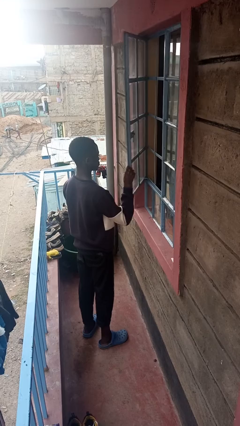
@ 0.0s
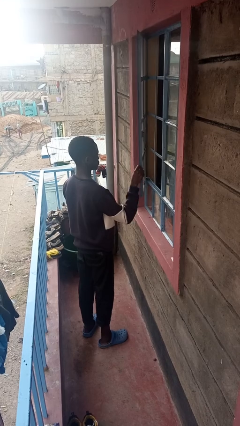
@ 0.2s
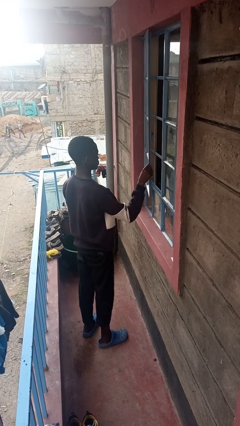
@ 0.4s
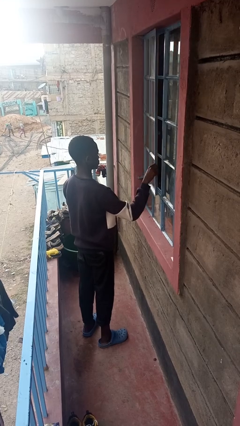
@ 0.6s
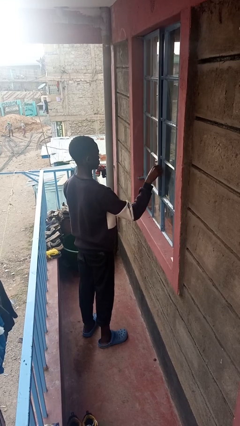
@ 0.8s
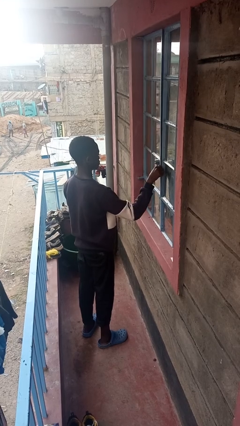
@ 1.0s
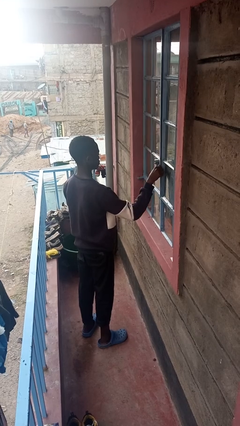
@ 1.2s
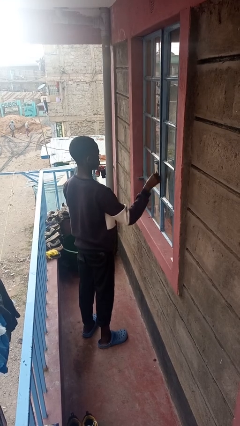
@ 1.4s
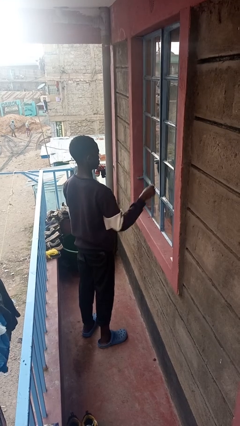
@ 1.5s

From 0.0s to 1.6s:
person closes home window

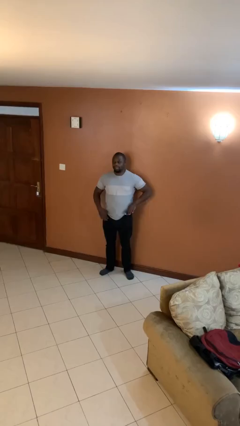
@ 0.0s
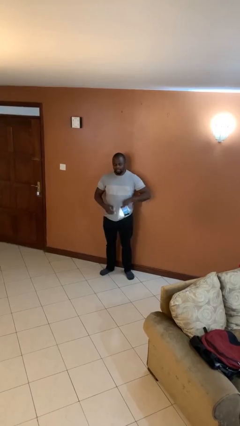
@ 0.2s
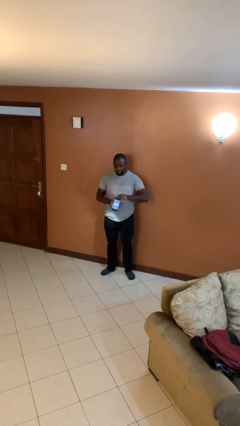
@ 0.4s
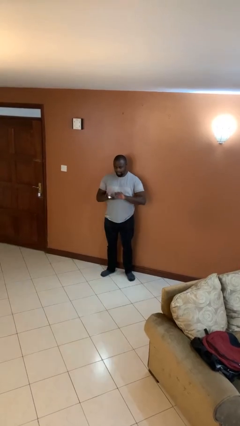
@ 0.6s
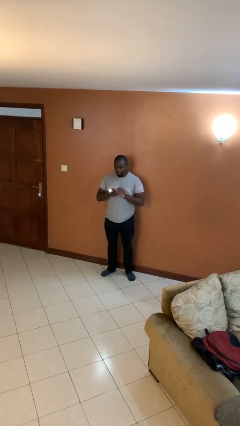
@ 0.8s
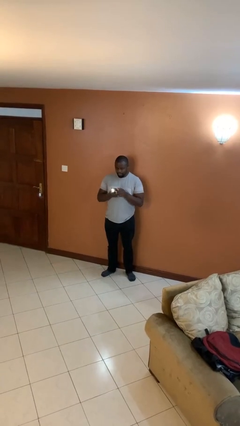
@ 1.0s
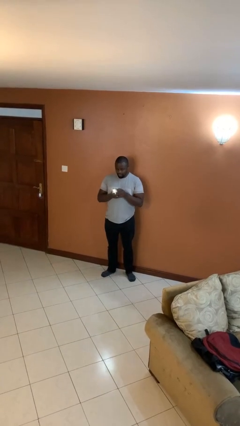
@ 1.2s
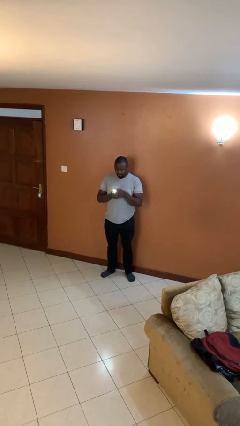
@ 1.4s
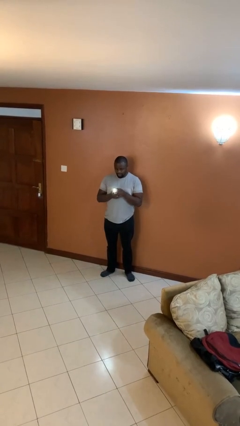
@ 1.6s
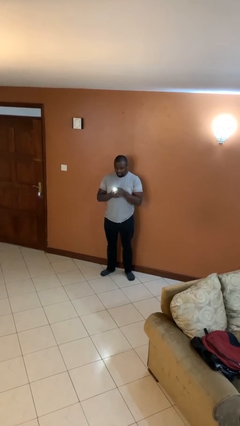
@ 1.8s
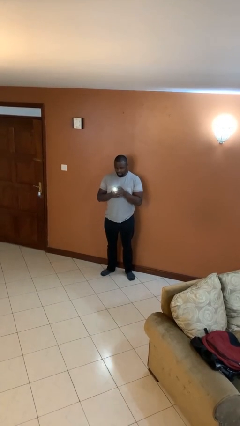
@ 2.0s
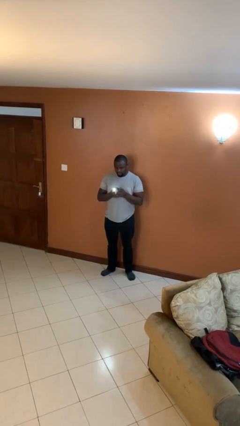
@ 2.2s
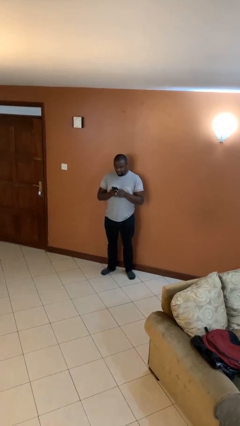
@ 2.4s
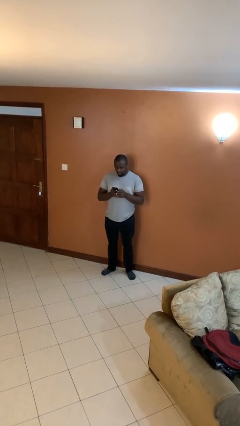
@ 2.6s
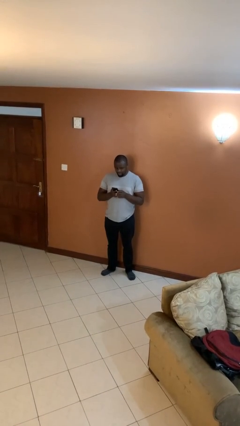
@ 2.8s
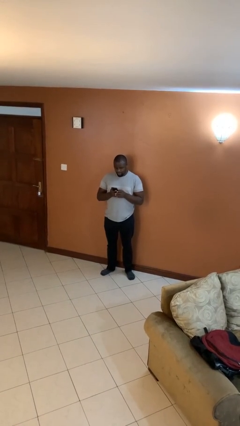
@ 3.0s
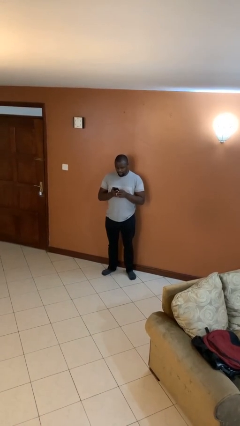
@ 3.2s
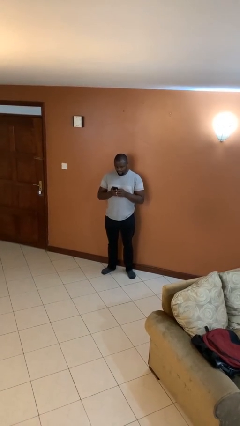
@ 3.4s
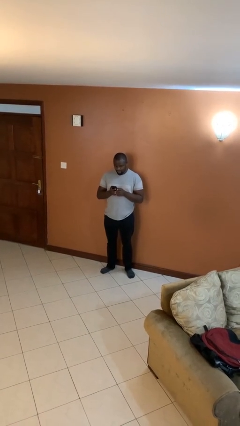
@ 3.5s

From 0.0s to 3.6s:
person takes phone from pocket

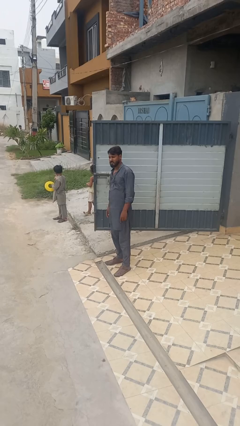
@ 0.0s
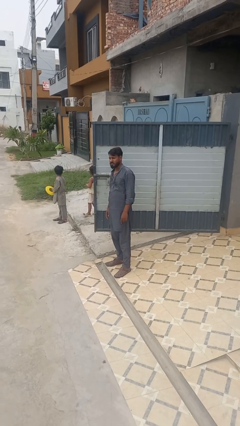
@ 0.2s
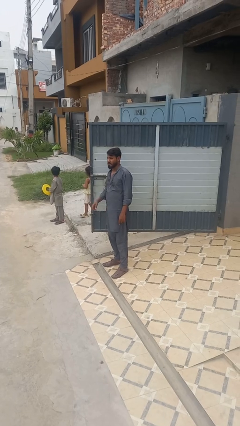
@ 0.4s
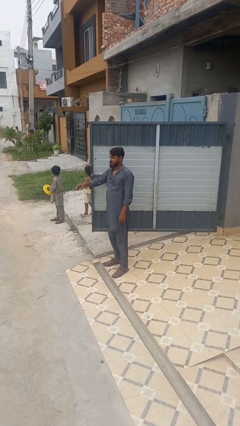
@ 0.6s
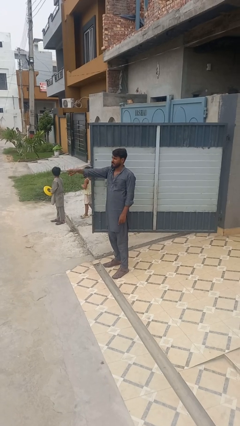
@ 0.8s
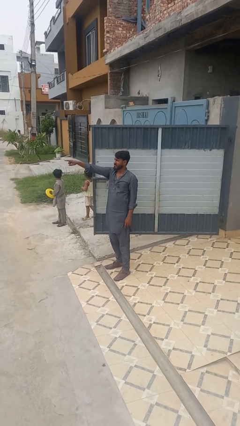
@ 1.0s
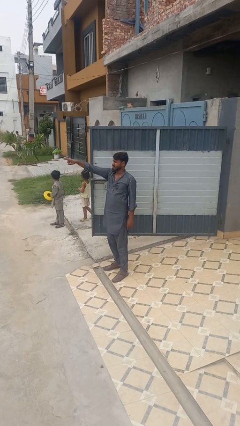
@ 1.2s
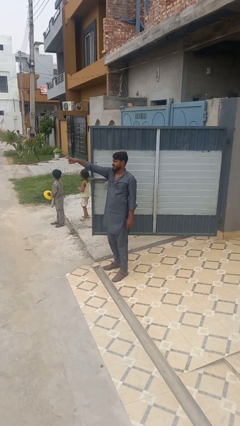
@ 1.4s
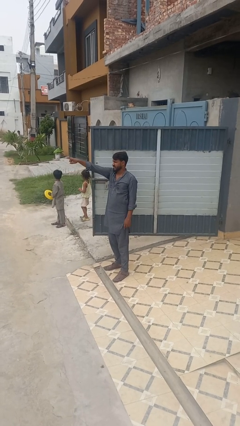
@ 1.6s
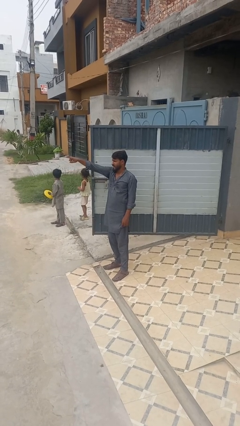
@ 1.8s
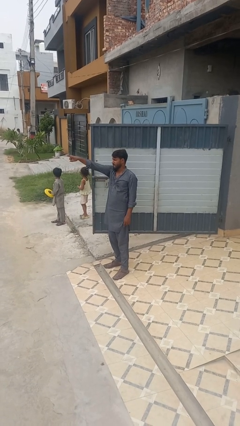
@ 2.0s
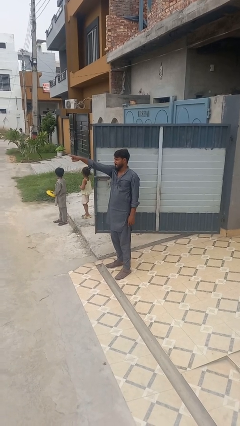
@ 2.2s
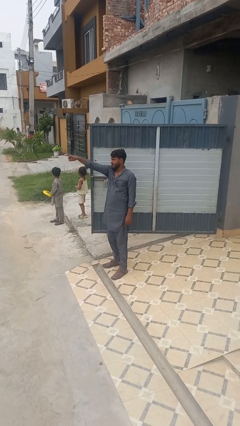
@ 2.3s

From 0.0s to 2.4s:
person points at person

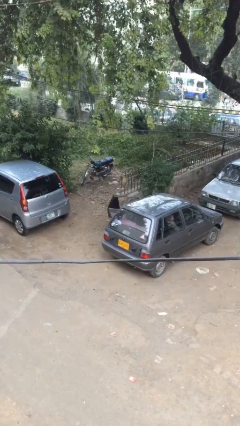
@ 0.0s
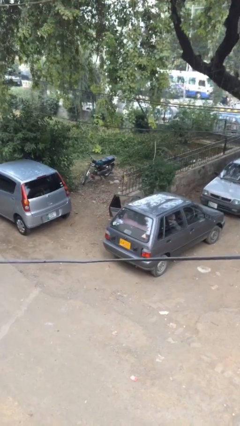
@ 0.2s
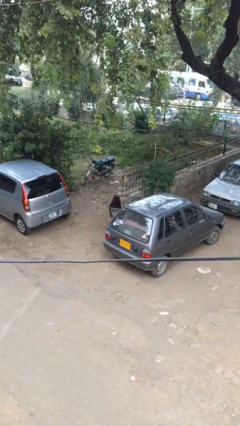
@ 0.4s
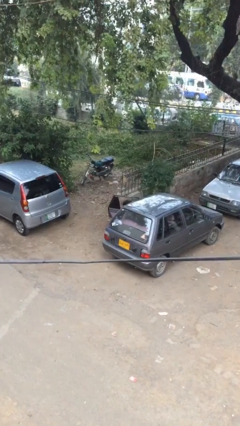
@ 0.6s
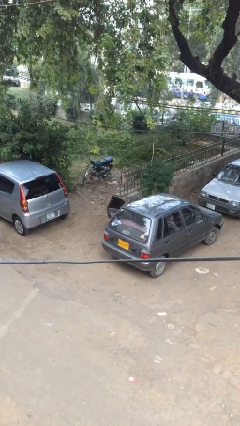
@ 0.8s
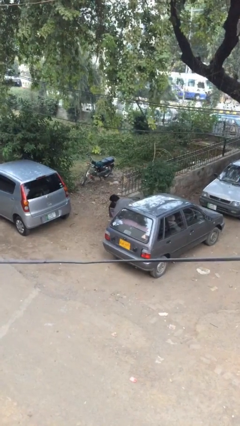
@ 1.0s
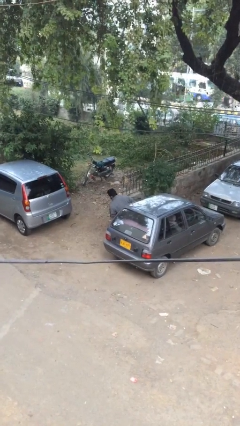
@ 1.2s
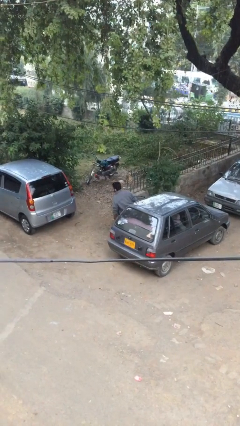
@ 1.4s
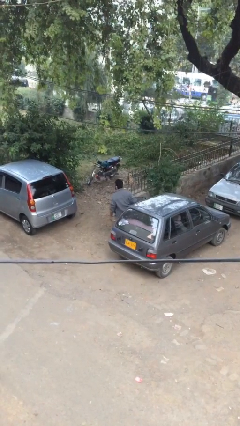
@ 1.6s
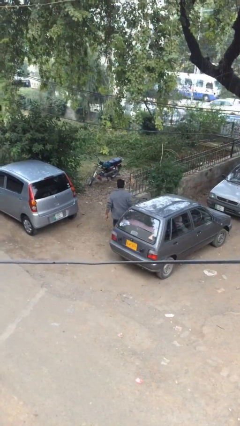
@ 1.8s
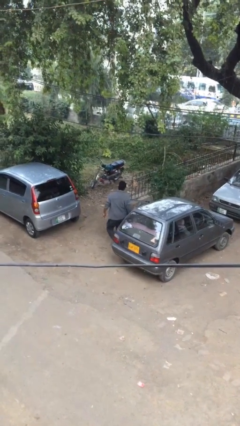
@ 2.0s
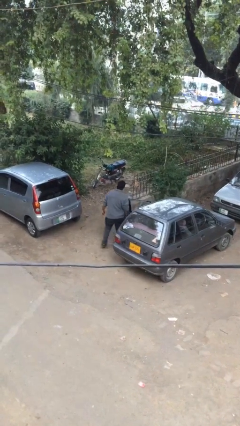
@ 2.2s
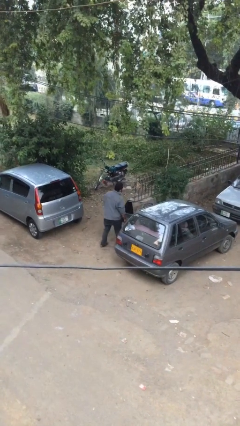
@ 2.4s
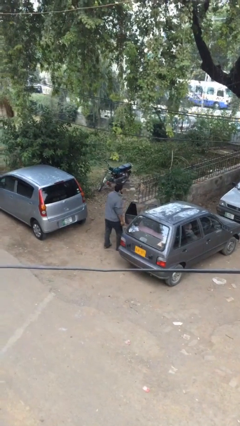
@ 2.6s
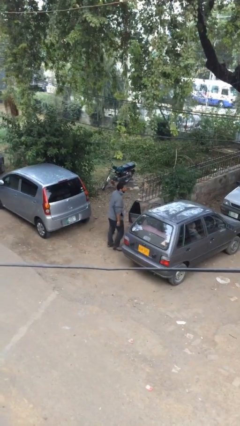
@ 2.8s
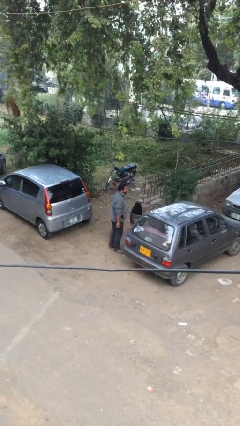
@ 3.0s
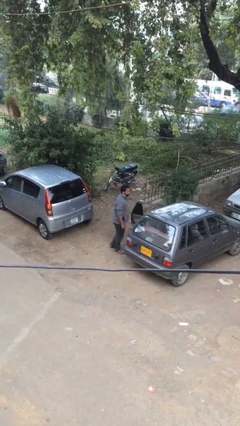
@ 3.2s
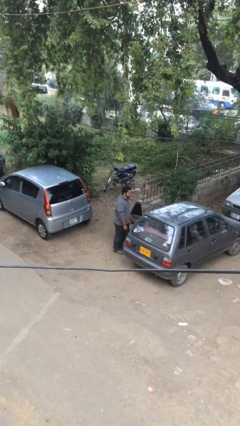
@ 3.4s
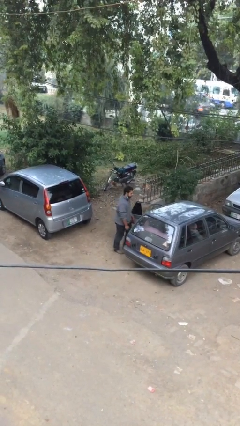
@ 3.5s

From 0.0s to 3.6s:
person exits car

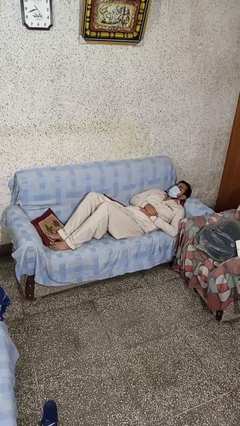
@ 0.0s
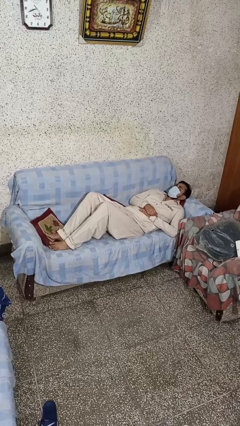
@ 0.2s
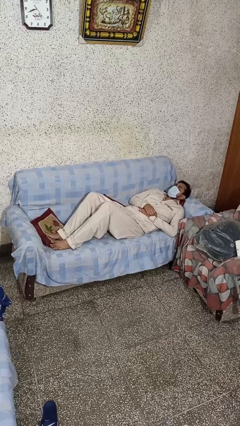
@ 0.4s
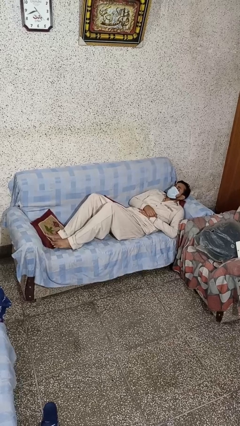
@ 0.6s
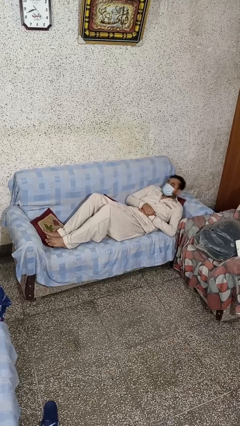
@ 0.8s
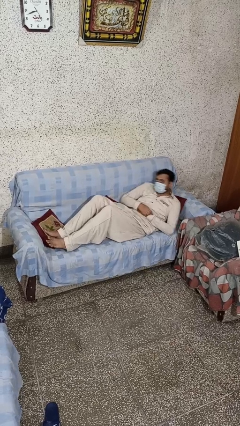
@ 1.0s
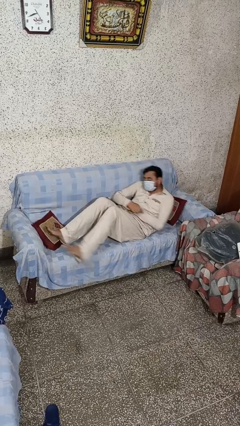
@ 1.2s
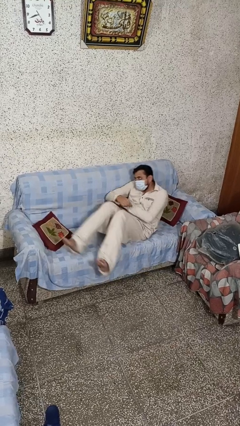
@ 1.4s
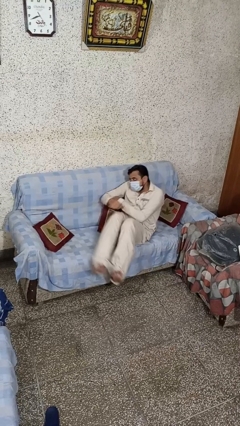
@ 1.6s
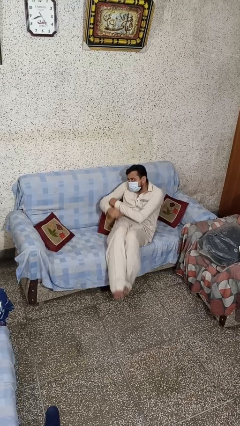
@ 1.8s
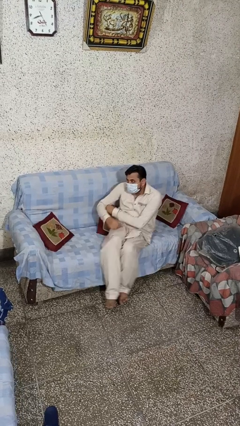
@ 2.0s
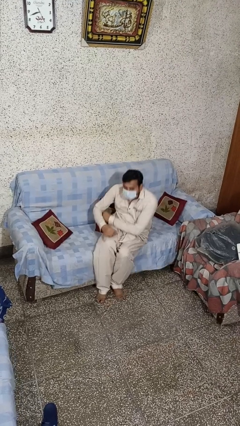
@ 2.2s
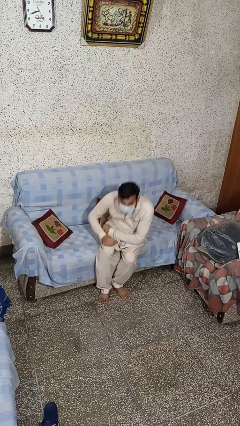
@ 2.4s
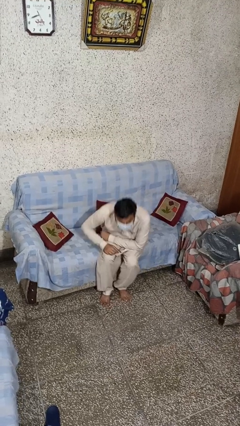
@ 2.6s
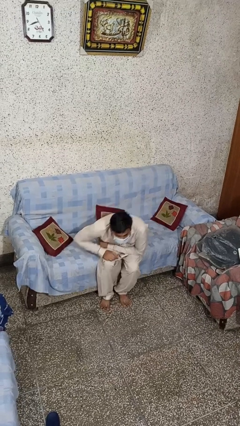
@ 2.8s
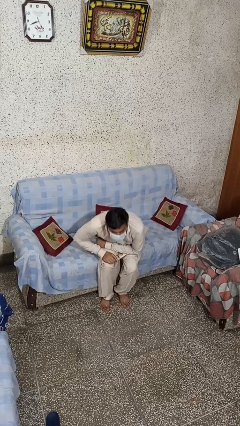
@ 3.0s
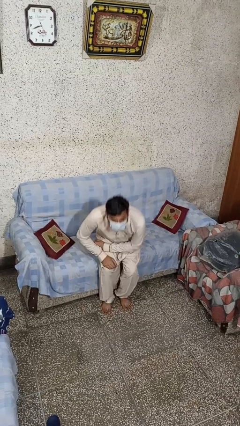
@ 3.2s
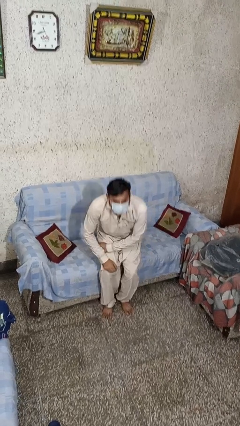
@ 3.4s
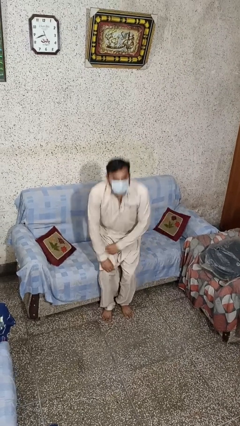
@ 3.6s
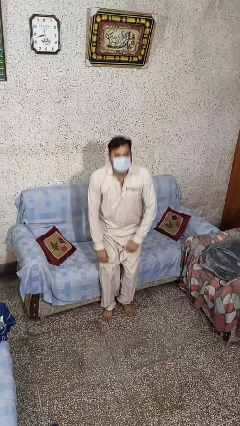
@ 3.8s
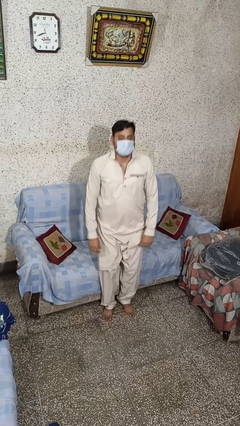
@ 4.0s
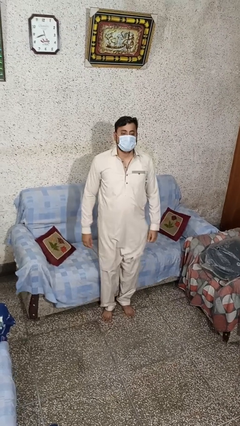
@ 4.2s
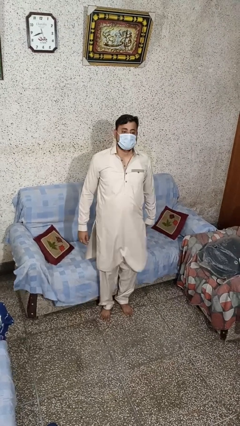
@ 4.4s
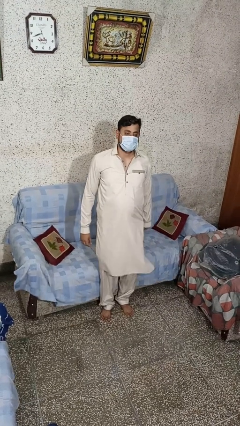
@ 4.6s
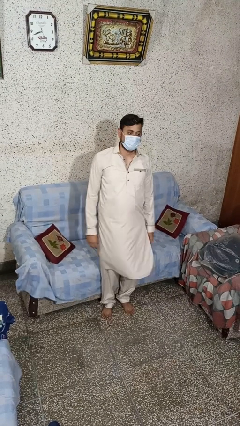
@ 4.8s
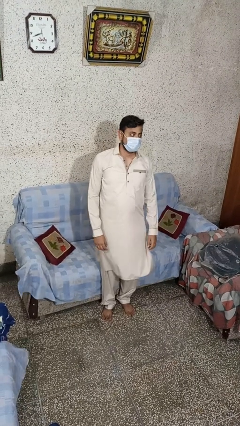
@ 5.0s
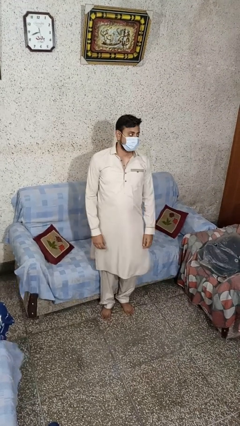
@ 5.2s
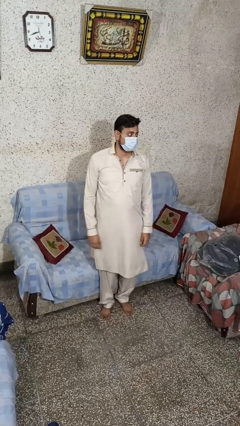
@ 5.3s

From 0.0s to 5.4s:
person stands up

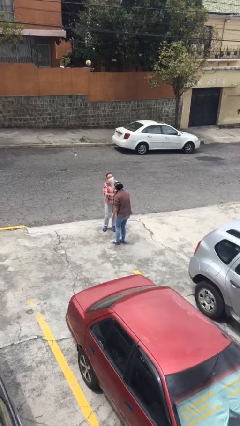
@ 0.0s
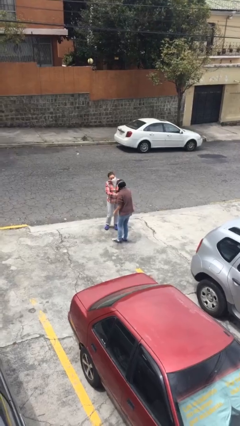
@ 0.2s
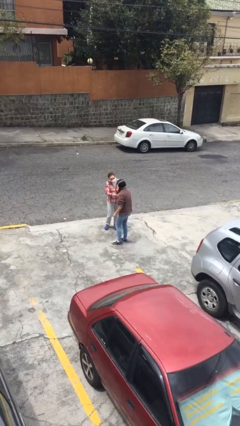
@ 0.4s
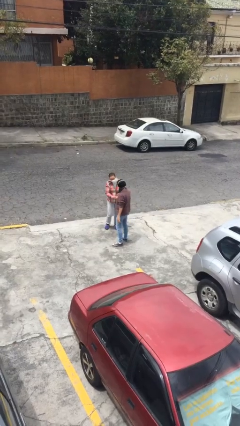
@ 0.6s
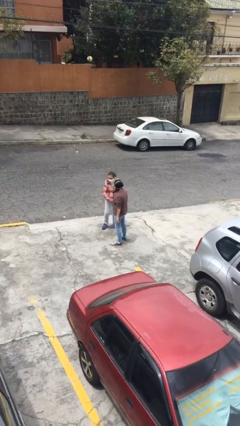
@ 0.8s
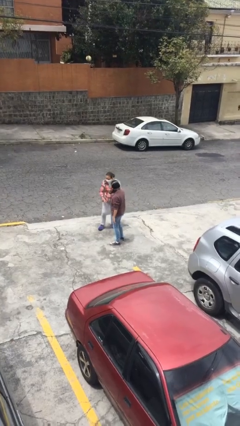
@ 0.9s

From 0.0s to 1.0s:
person shakes hand

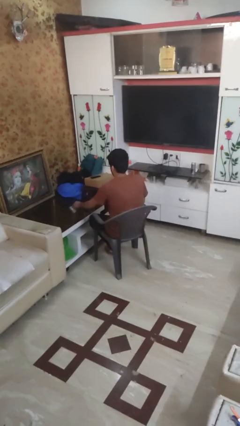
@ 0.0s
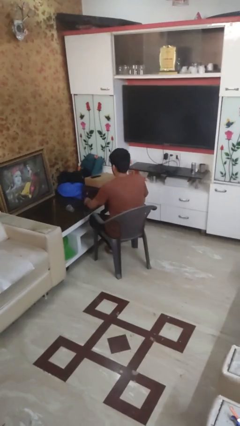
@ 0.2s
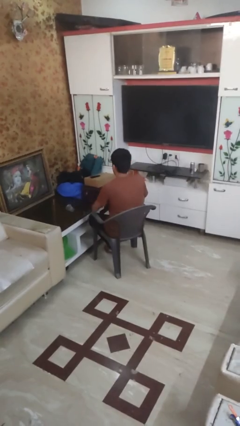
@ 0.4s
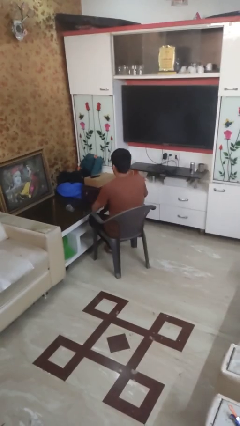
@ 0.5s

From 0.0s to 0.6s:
person knocks over glass
